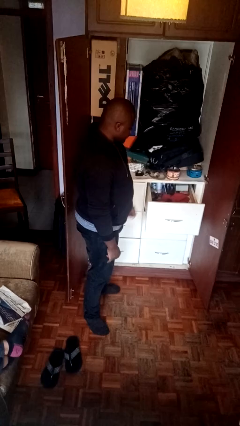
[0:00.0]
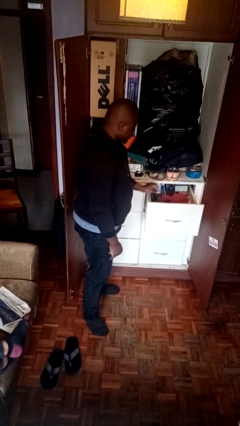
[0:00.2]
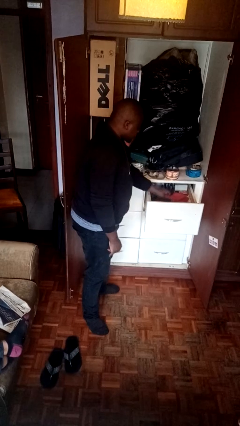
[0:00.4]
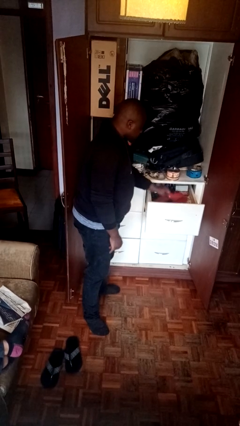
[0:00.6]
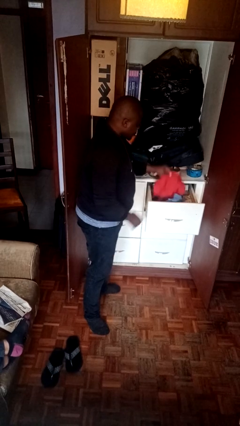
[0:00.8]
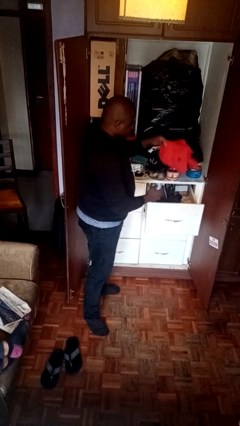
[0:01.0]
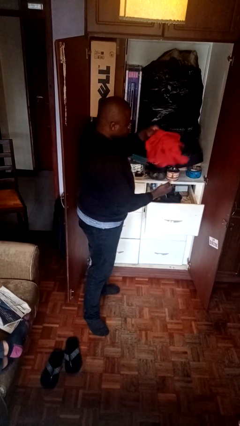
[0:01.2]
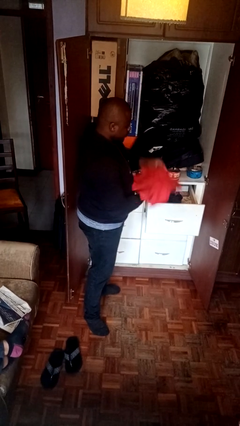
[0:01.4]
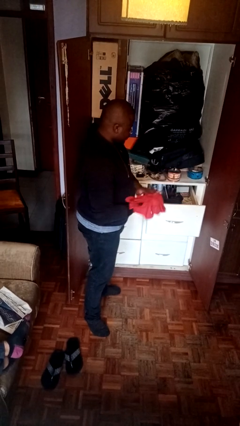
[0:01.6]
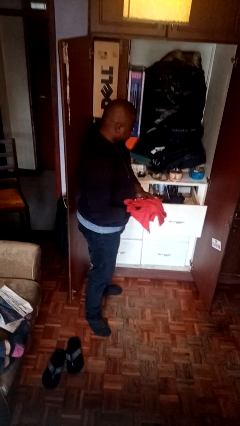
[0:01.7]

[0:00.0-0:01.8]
person takes clothes from dresser

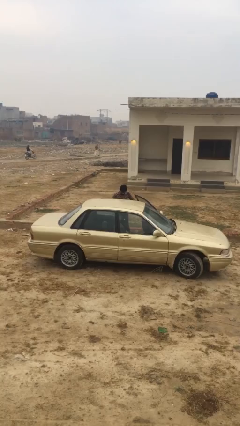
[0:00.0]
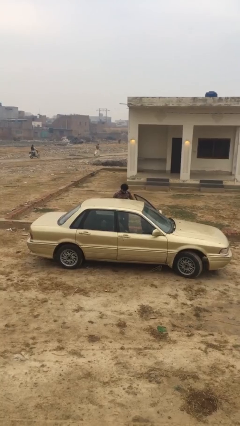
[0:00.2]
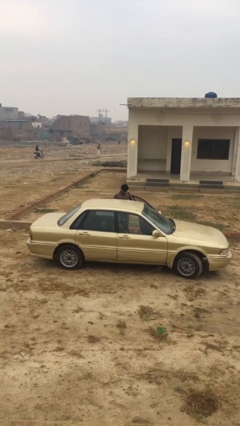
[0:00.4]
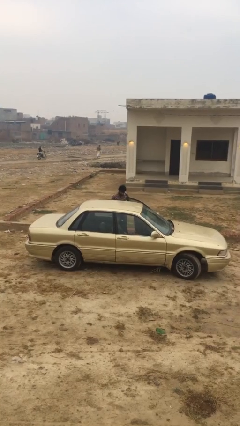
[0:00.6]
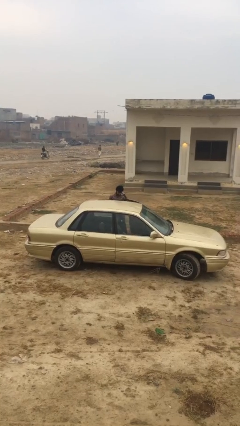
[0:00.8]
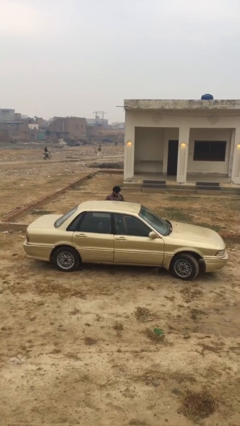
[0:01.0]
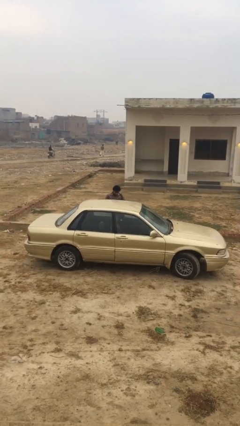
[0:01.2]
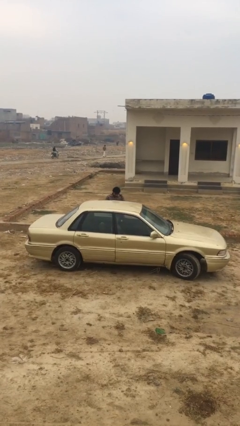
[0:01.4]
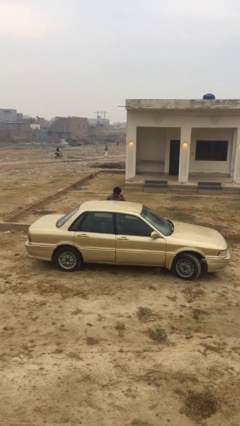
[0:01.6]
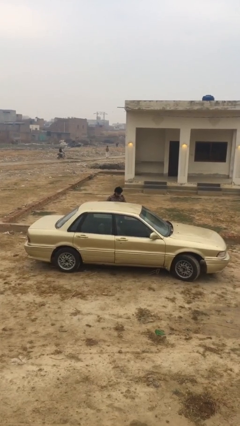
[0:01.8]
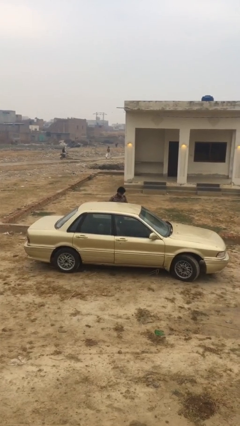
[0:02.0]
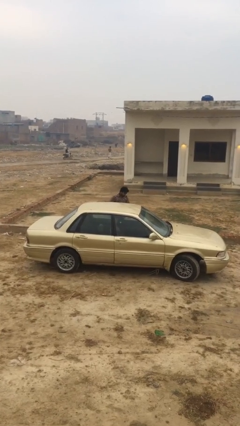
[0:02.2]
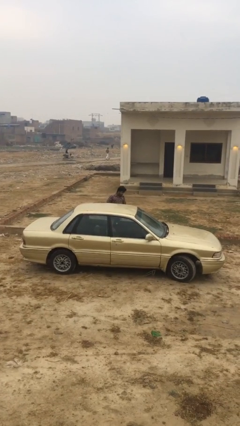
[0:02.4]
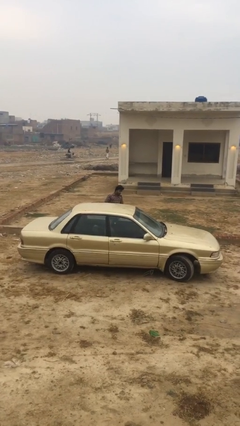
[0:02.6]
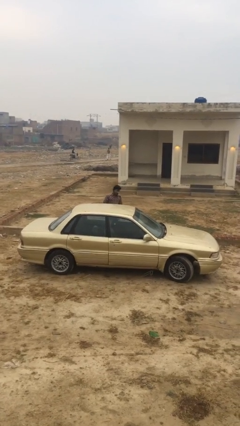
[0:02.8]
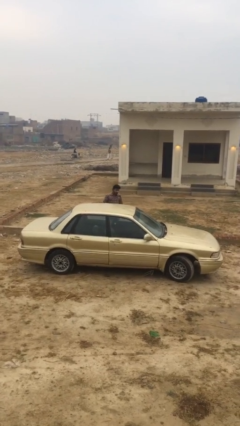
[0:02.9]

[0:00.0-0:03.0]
person closes car door

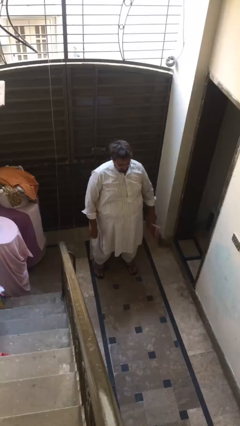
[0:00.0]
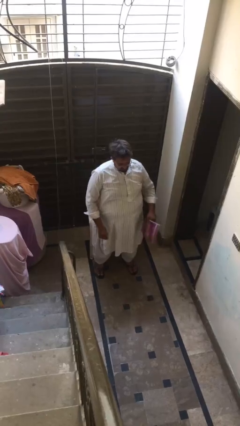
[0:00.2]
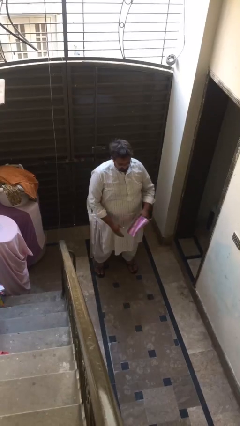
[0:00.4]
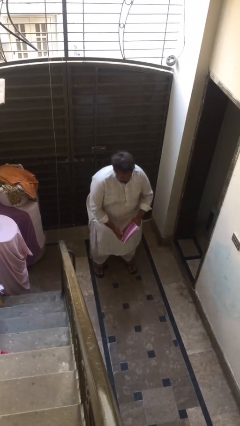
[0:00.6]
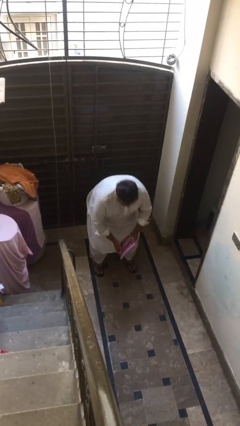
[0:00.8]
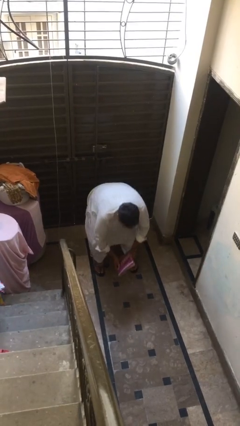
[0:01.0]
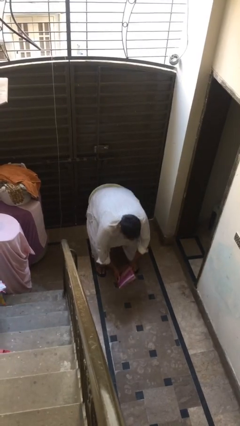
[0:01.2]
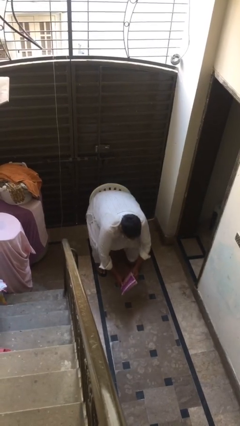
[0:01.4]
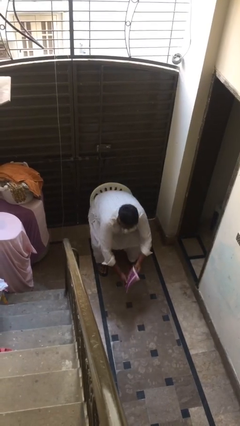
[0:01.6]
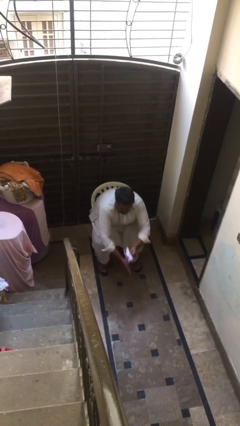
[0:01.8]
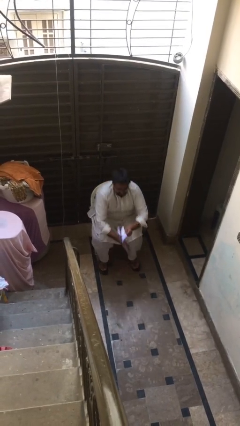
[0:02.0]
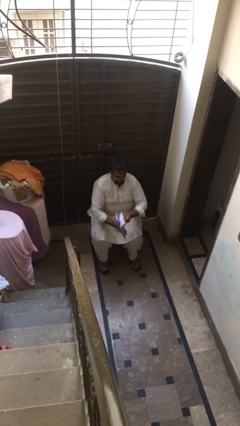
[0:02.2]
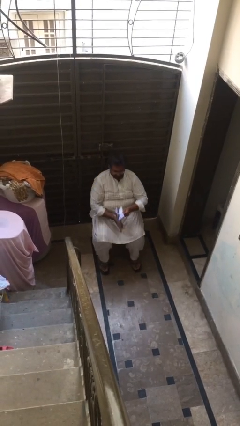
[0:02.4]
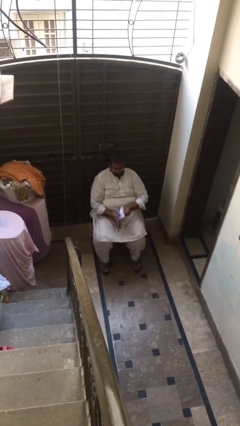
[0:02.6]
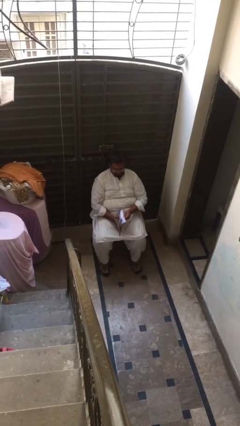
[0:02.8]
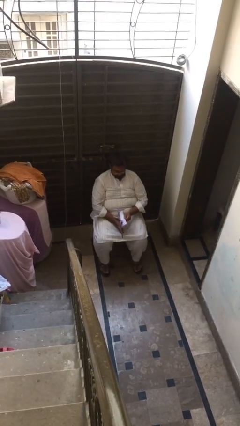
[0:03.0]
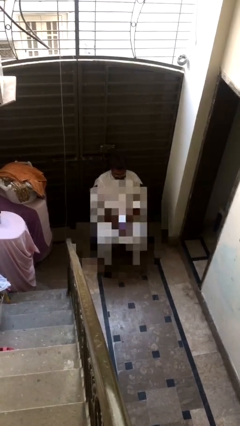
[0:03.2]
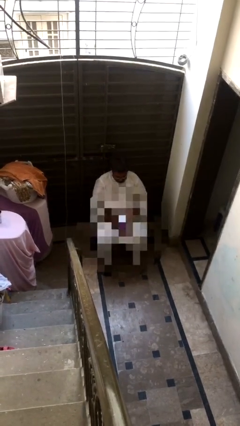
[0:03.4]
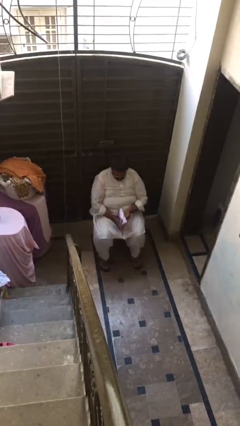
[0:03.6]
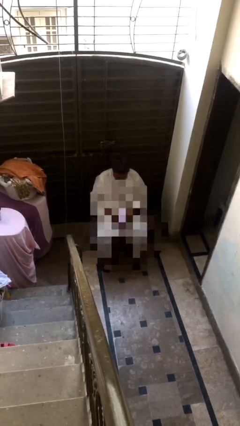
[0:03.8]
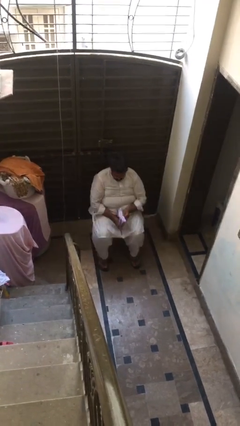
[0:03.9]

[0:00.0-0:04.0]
person sits down

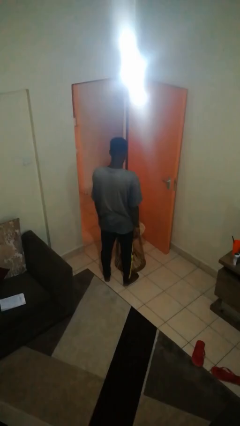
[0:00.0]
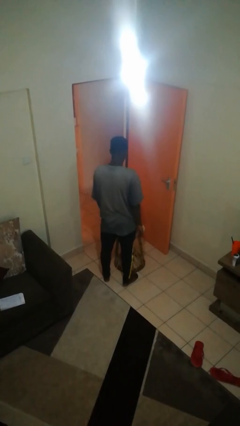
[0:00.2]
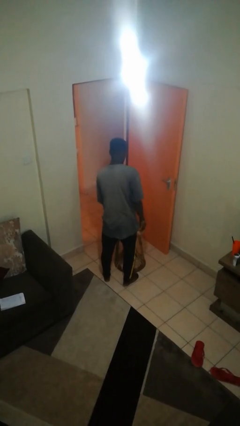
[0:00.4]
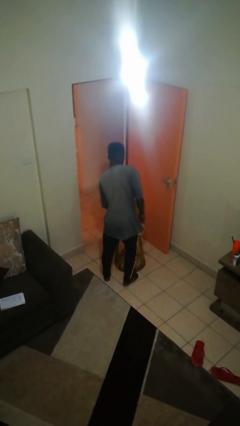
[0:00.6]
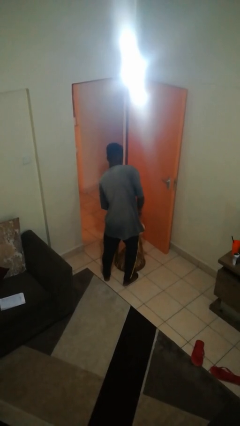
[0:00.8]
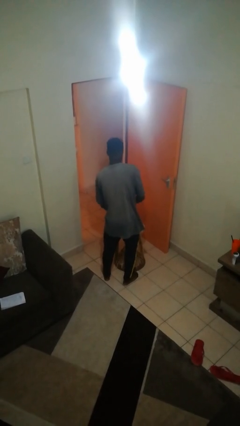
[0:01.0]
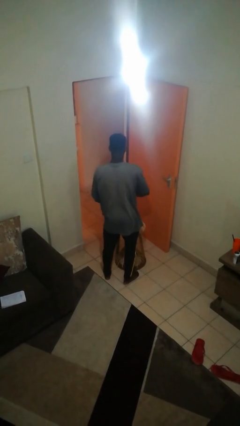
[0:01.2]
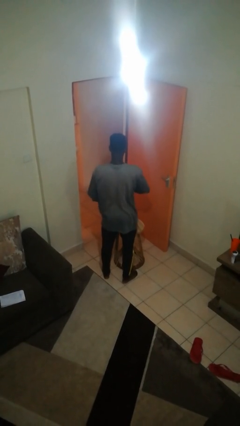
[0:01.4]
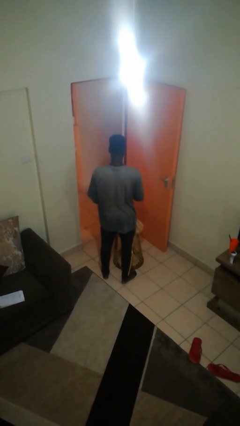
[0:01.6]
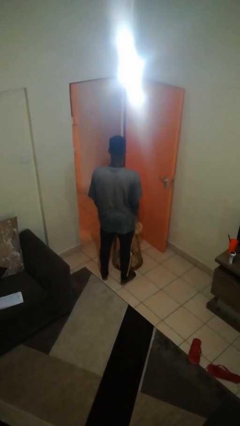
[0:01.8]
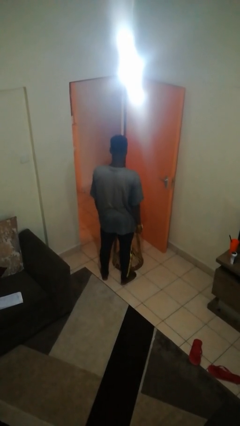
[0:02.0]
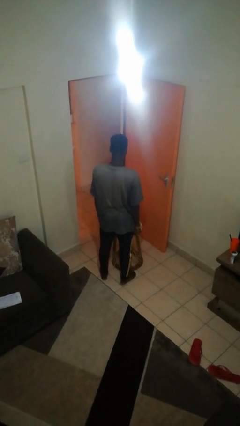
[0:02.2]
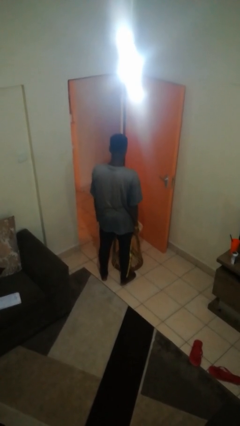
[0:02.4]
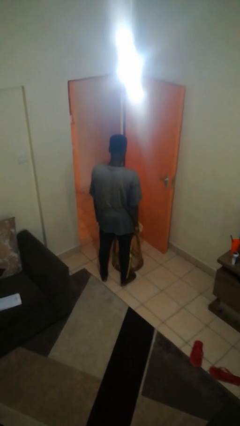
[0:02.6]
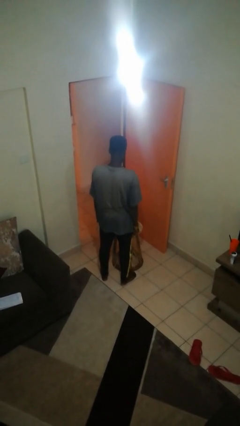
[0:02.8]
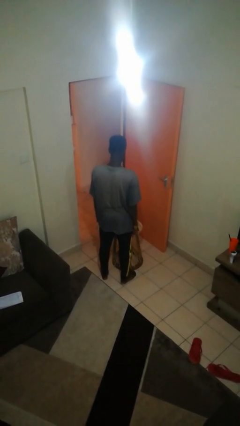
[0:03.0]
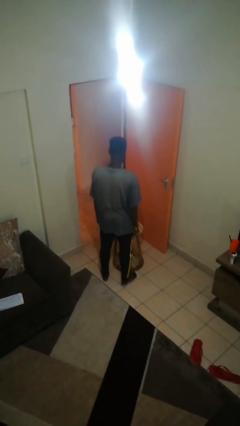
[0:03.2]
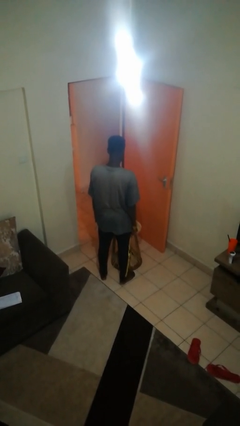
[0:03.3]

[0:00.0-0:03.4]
person unscrews lid from bottle

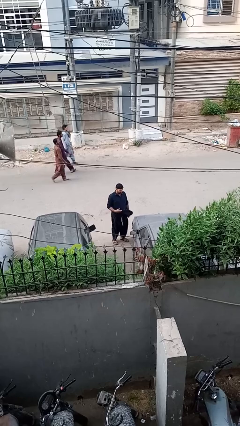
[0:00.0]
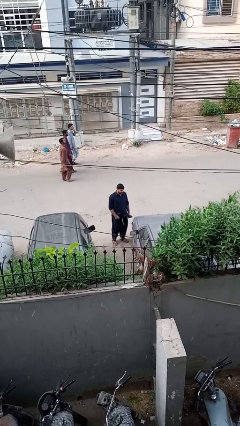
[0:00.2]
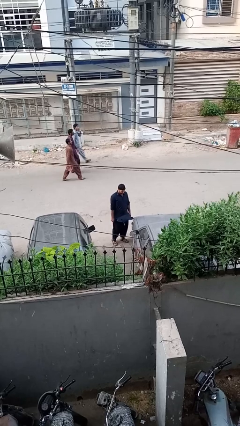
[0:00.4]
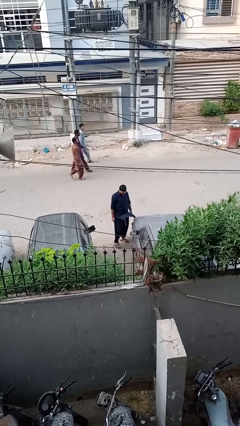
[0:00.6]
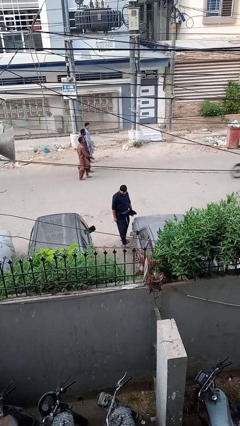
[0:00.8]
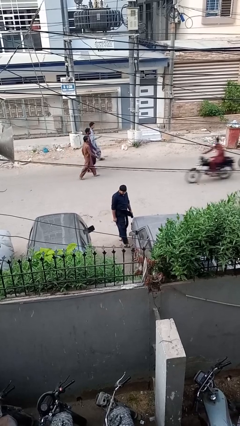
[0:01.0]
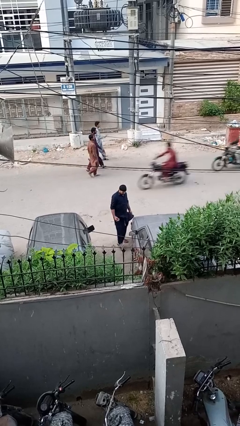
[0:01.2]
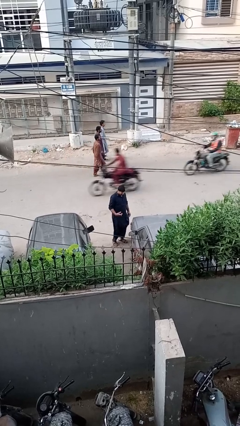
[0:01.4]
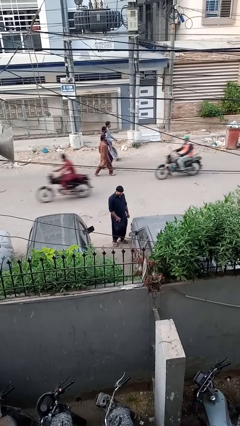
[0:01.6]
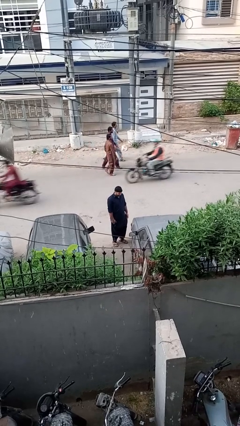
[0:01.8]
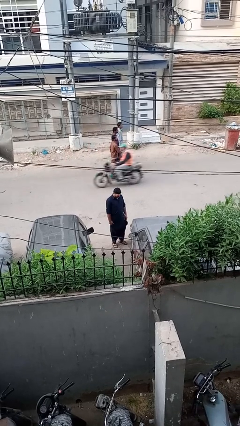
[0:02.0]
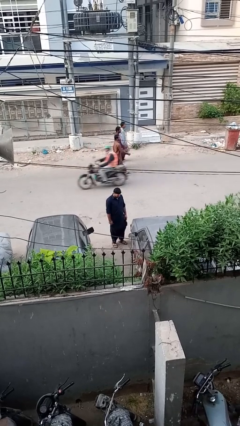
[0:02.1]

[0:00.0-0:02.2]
person kicks car tires

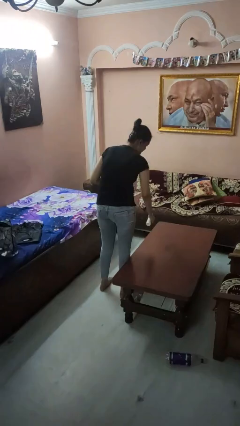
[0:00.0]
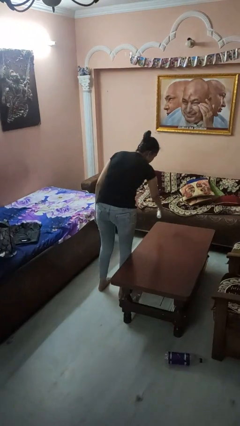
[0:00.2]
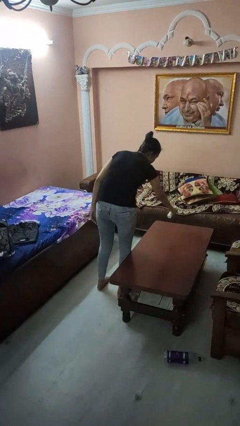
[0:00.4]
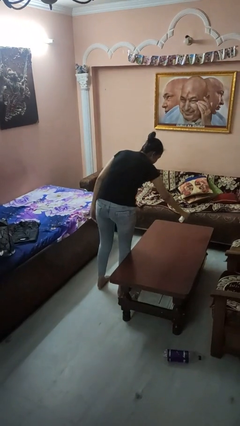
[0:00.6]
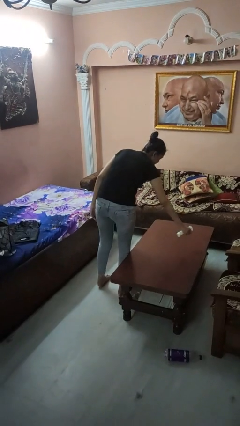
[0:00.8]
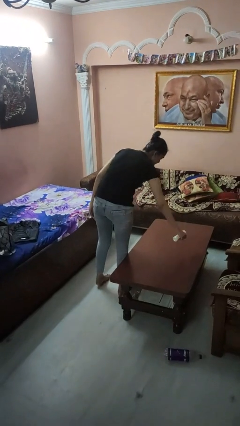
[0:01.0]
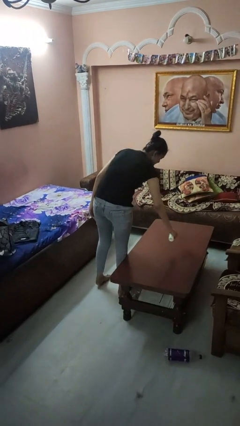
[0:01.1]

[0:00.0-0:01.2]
person sprays from bottle

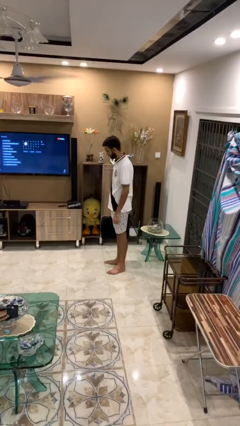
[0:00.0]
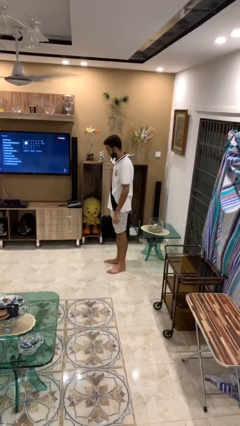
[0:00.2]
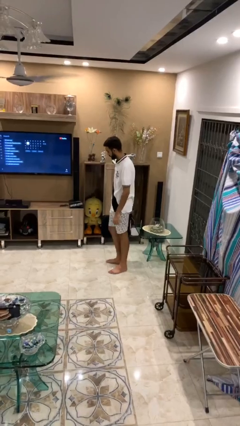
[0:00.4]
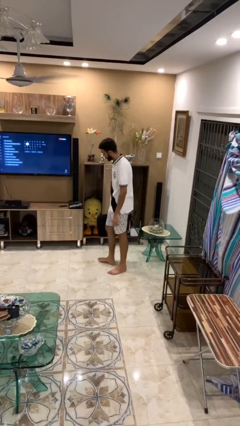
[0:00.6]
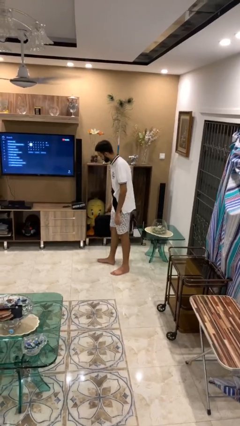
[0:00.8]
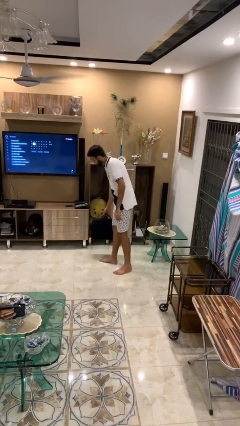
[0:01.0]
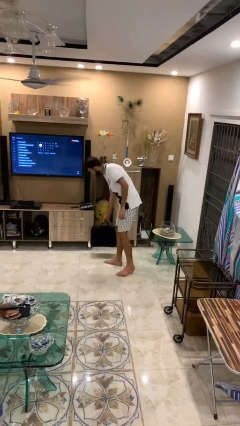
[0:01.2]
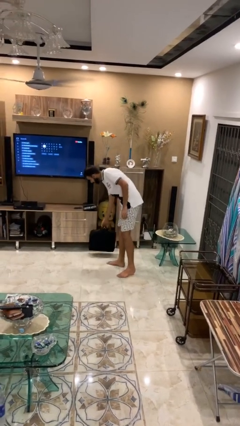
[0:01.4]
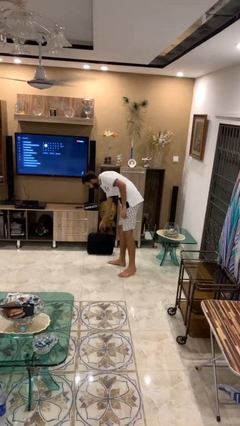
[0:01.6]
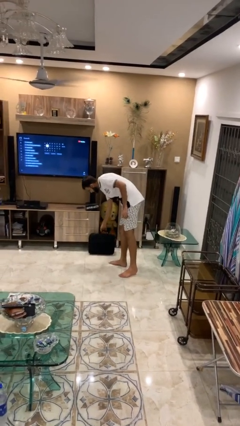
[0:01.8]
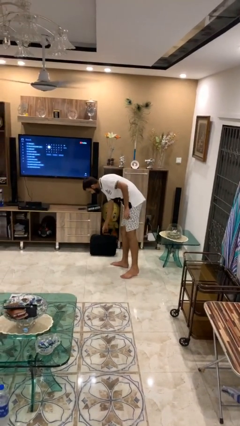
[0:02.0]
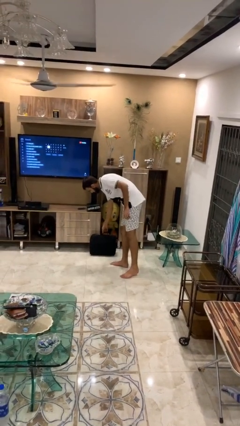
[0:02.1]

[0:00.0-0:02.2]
person puts down object on floor
